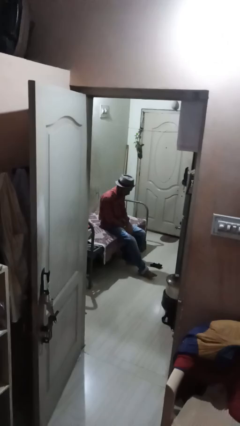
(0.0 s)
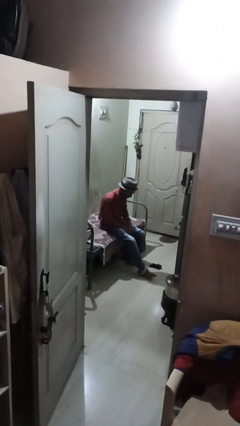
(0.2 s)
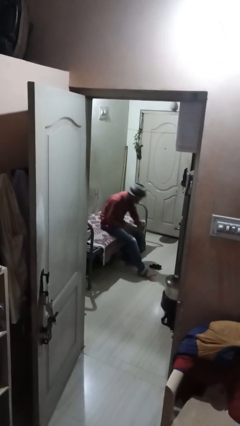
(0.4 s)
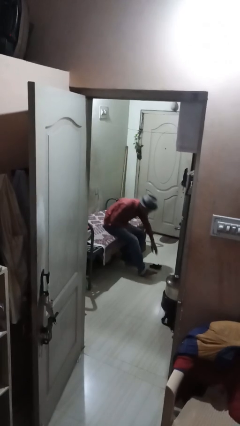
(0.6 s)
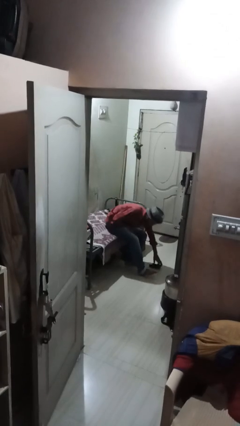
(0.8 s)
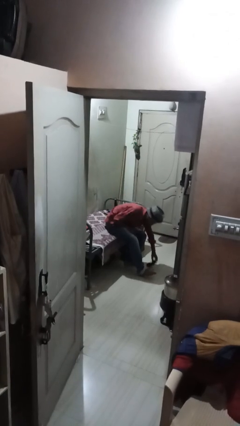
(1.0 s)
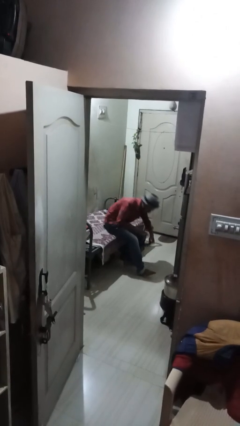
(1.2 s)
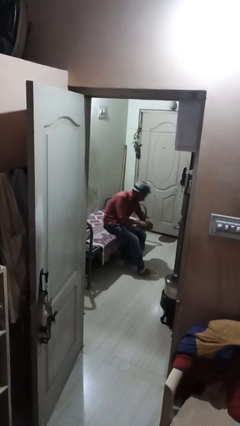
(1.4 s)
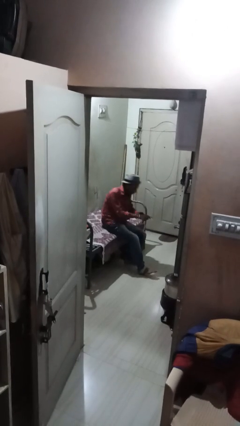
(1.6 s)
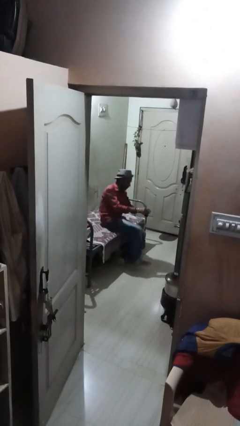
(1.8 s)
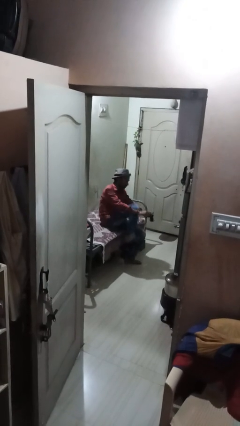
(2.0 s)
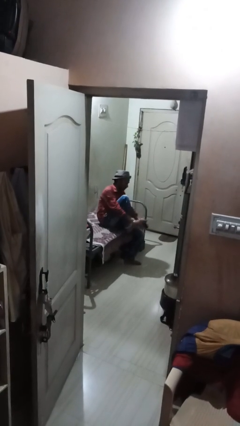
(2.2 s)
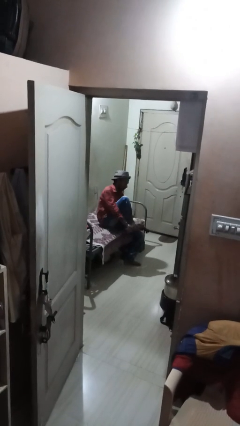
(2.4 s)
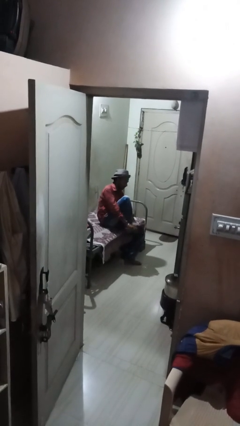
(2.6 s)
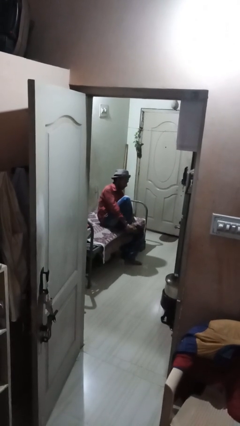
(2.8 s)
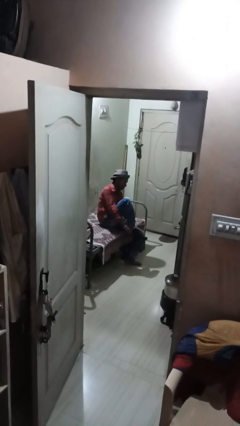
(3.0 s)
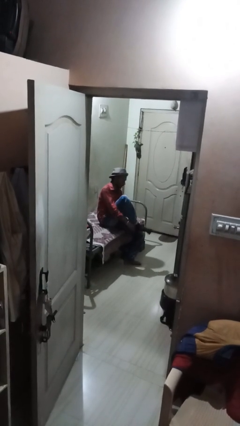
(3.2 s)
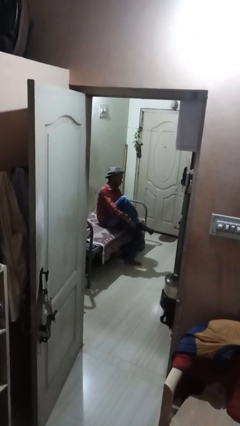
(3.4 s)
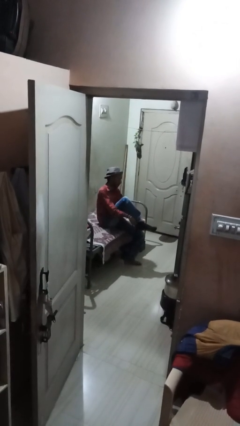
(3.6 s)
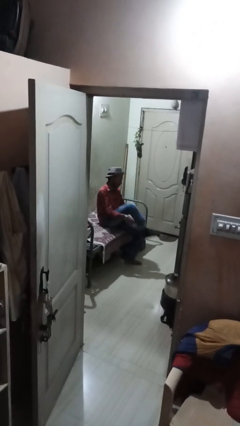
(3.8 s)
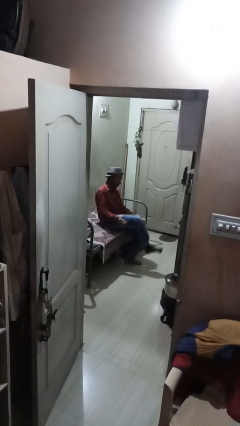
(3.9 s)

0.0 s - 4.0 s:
person puts on socks

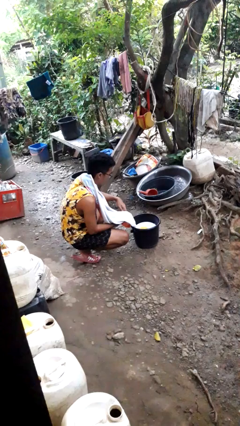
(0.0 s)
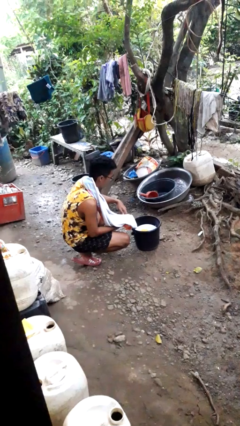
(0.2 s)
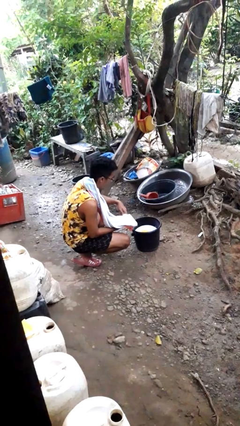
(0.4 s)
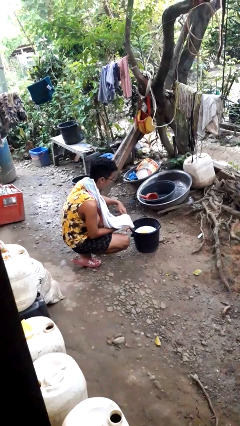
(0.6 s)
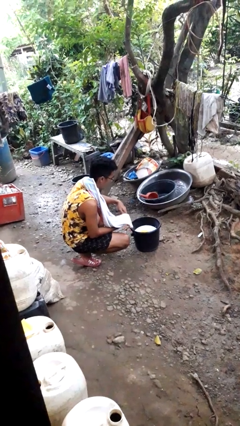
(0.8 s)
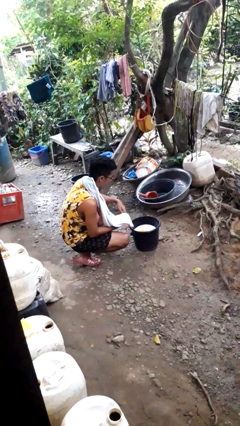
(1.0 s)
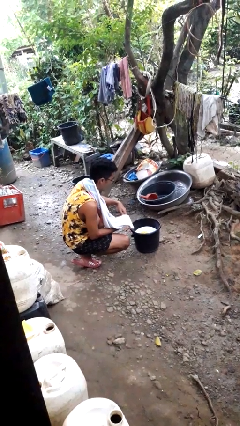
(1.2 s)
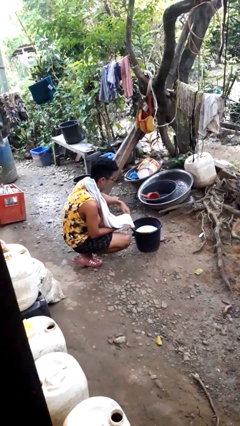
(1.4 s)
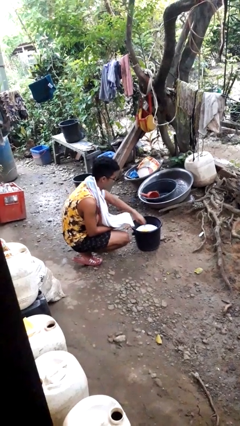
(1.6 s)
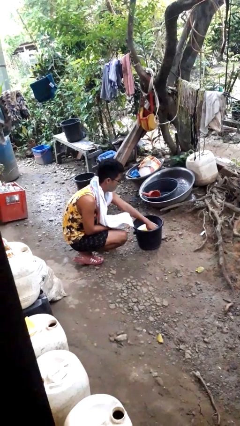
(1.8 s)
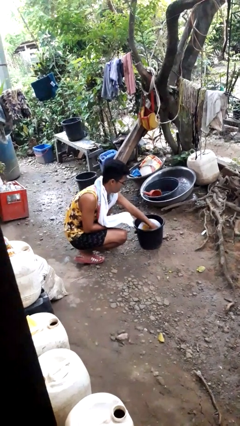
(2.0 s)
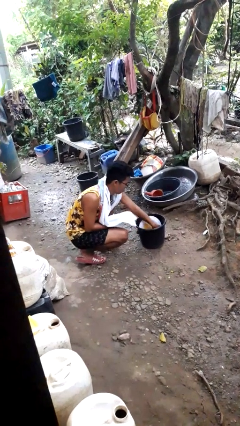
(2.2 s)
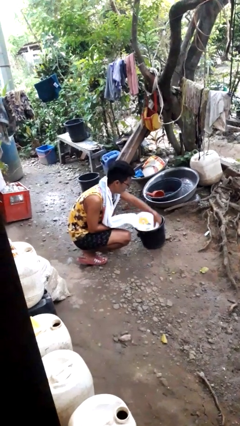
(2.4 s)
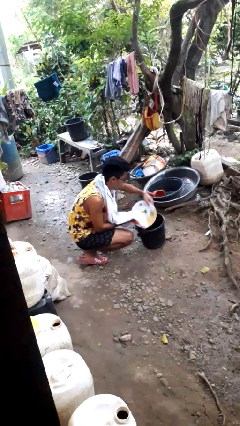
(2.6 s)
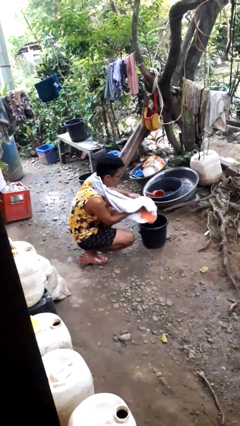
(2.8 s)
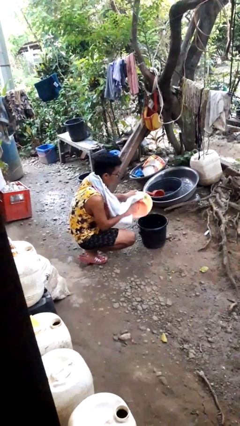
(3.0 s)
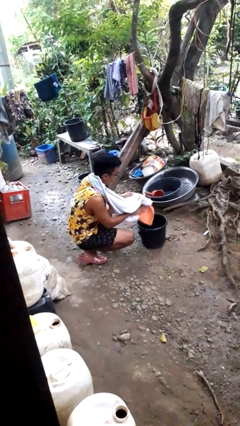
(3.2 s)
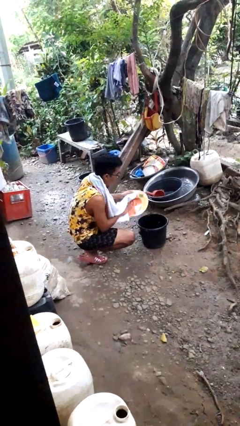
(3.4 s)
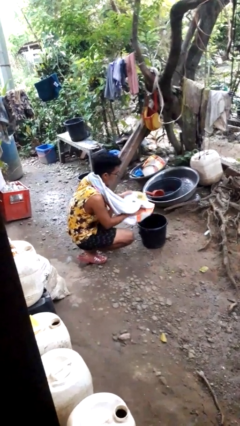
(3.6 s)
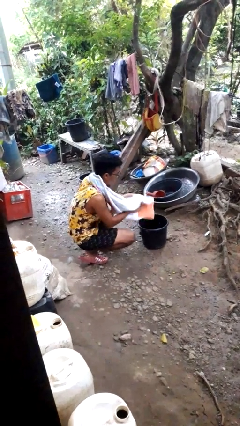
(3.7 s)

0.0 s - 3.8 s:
person dries dish

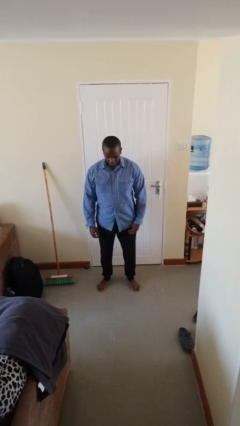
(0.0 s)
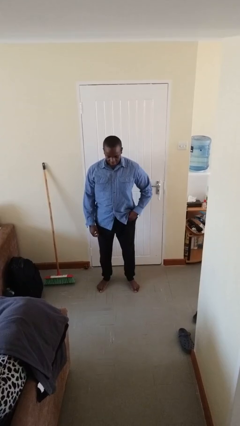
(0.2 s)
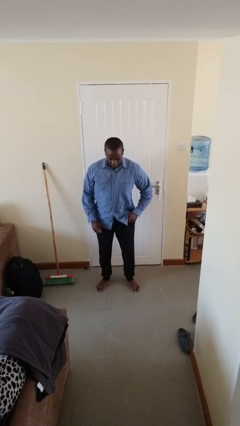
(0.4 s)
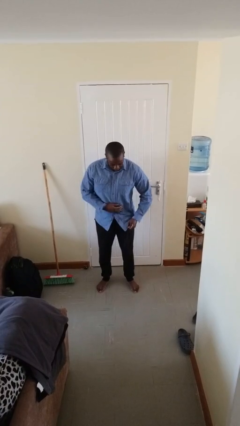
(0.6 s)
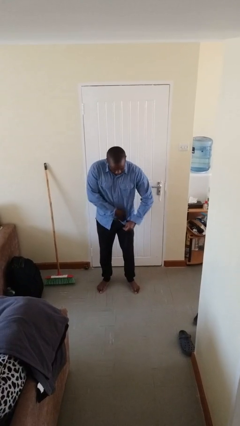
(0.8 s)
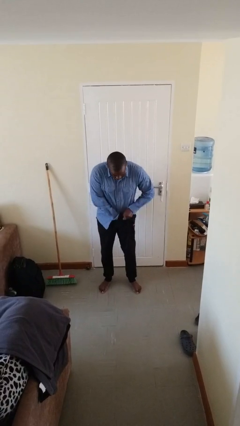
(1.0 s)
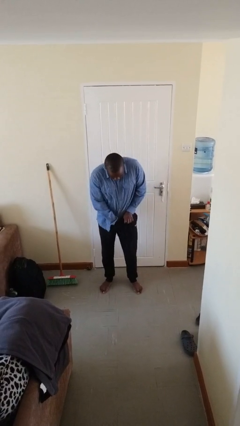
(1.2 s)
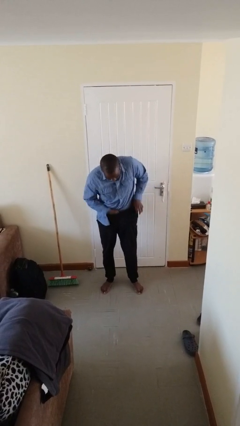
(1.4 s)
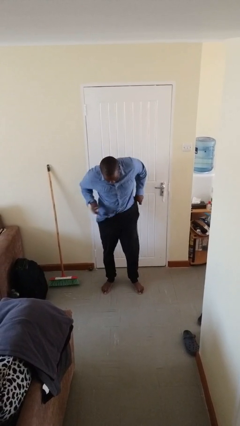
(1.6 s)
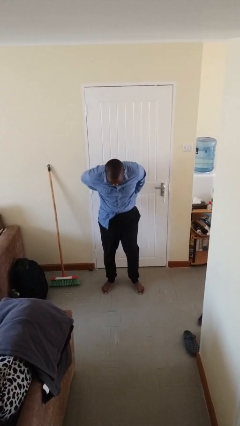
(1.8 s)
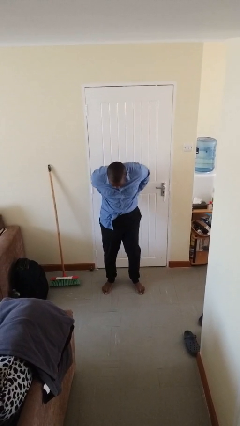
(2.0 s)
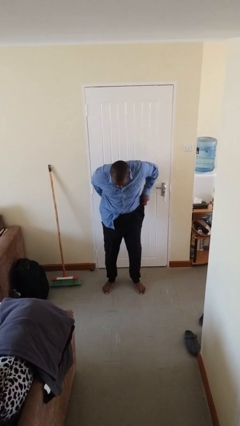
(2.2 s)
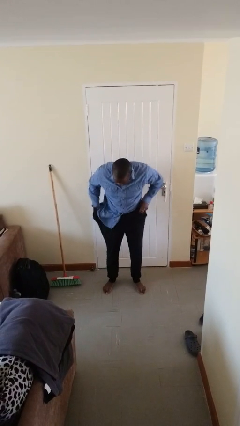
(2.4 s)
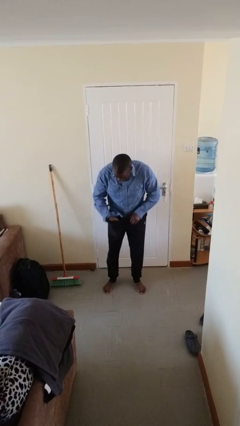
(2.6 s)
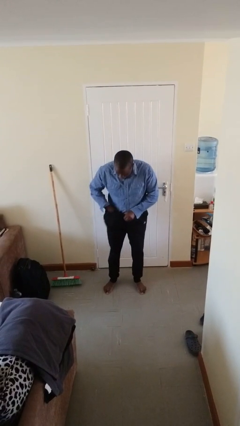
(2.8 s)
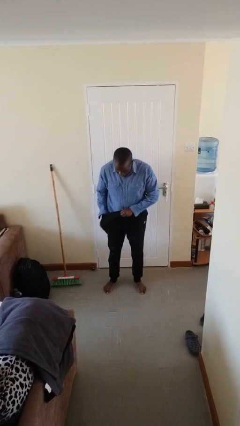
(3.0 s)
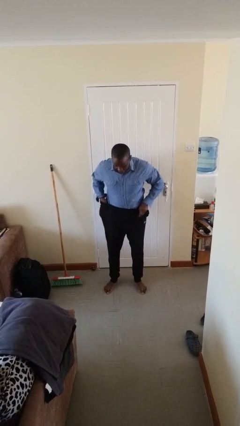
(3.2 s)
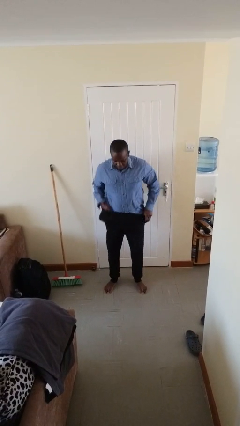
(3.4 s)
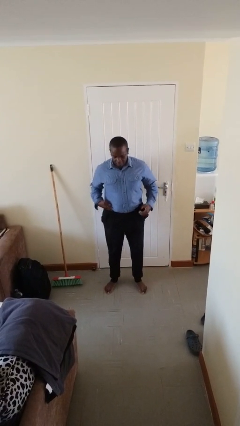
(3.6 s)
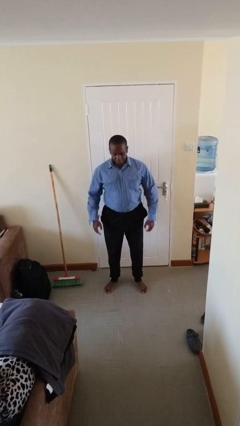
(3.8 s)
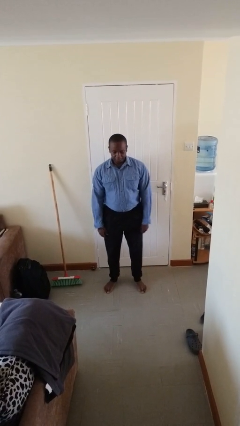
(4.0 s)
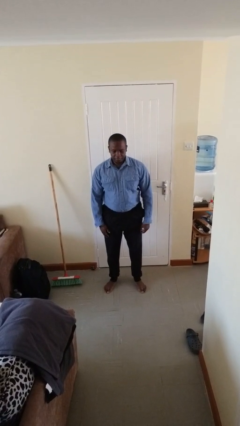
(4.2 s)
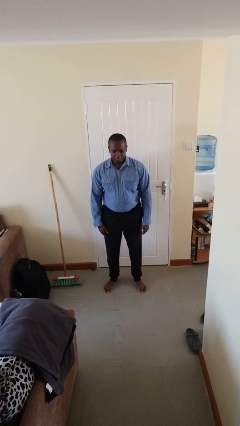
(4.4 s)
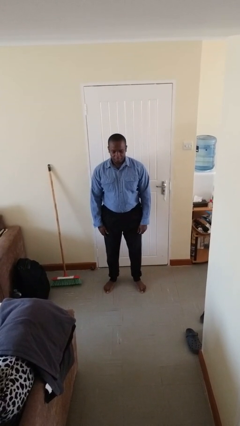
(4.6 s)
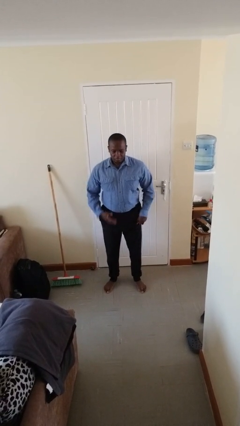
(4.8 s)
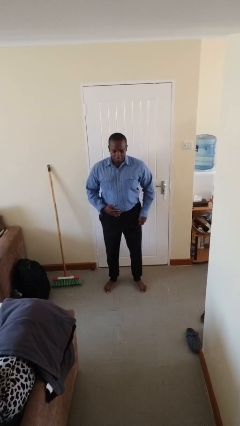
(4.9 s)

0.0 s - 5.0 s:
person tucks in shirt

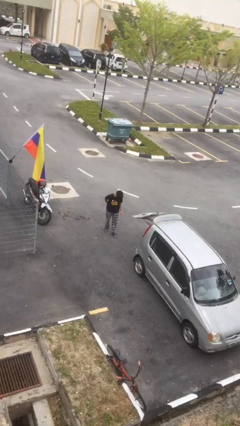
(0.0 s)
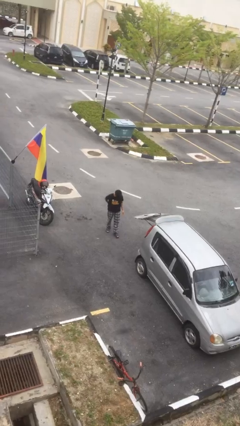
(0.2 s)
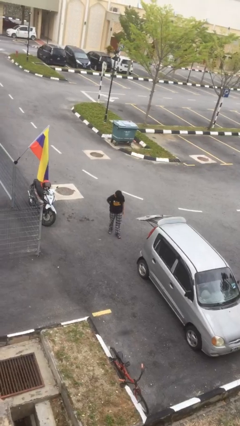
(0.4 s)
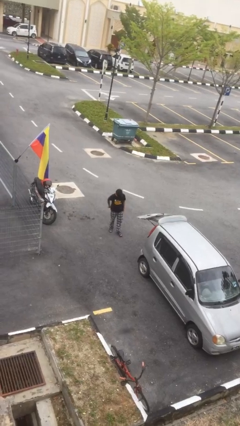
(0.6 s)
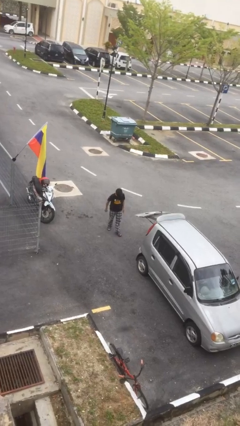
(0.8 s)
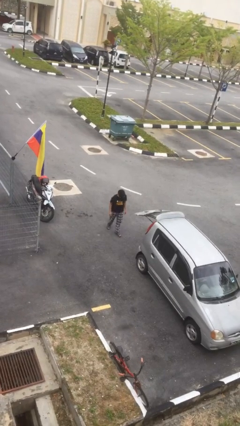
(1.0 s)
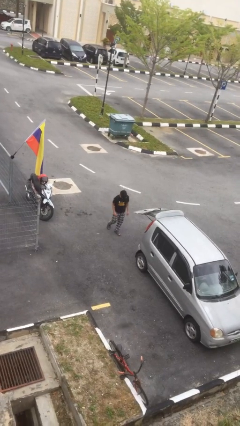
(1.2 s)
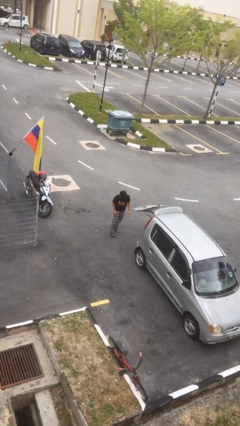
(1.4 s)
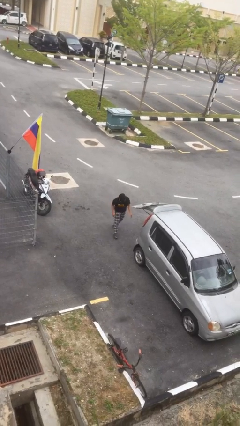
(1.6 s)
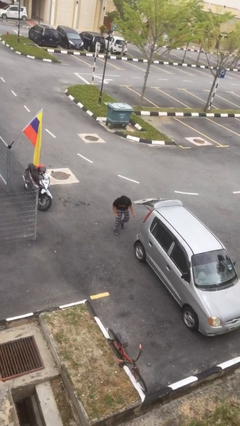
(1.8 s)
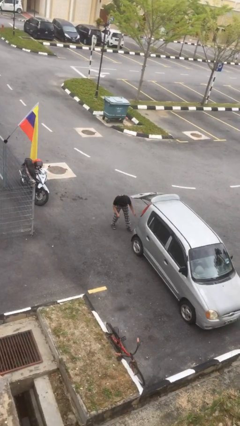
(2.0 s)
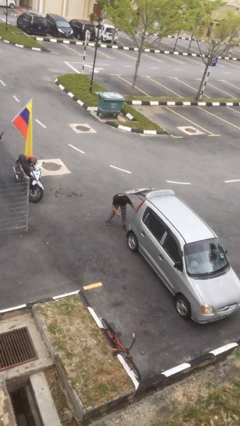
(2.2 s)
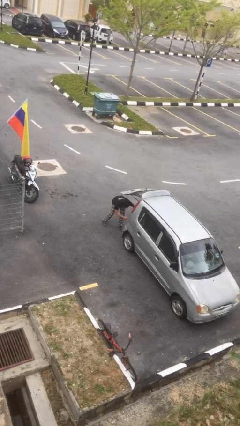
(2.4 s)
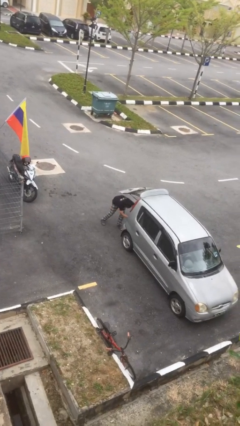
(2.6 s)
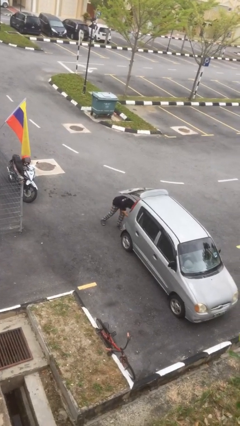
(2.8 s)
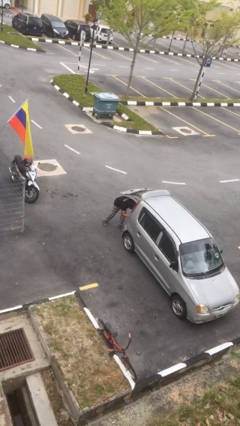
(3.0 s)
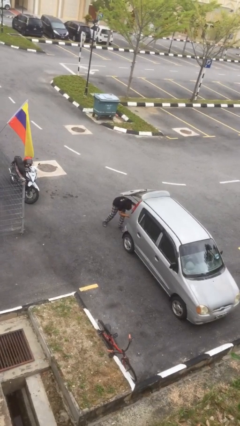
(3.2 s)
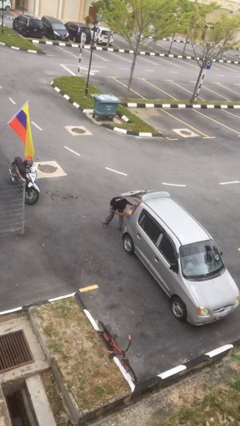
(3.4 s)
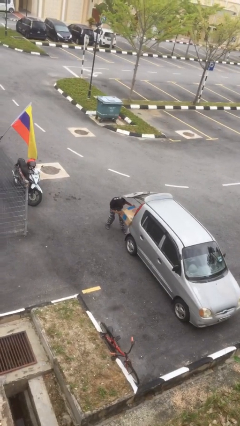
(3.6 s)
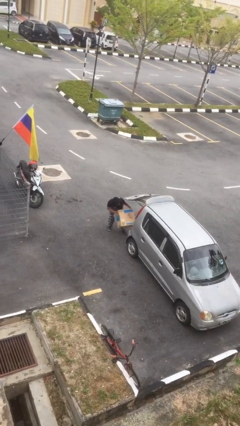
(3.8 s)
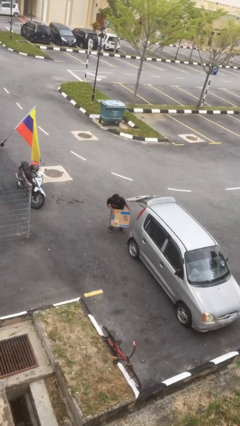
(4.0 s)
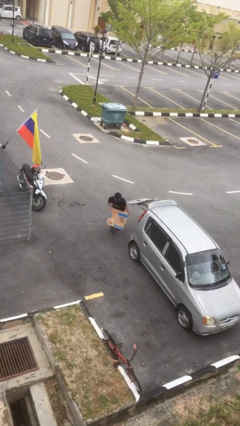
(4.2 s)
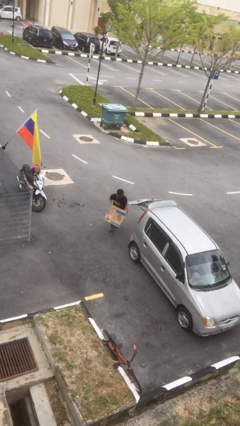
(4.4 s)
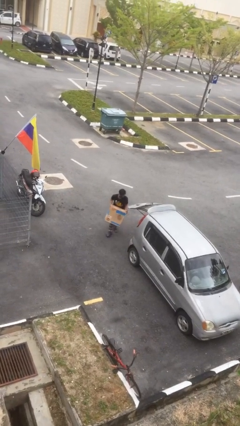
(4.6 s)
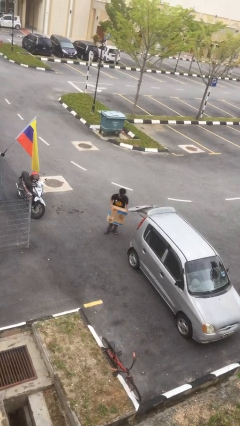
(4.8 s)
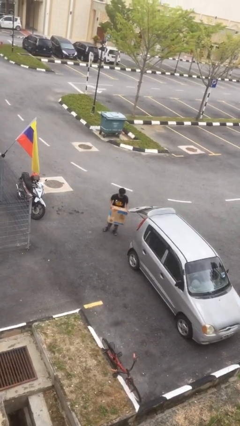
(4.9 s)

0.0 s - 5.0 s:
person unloads car
